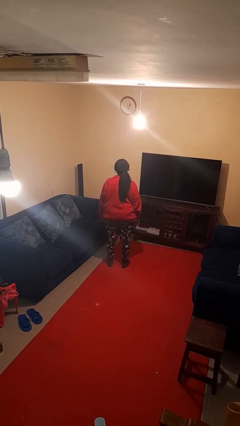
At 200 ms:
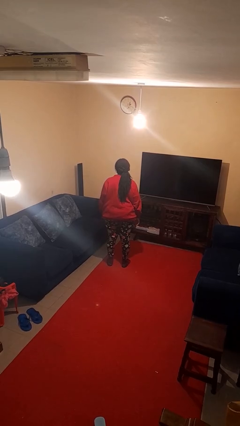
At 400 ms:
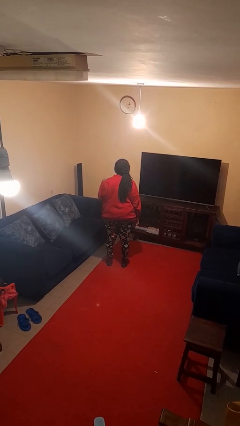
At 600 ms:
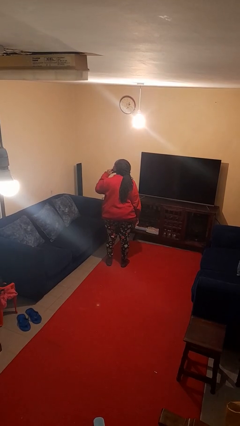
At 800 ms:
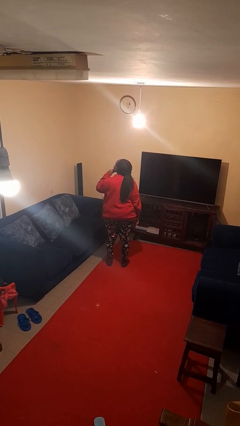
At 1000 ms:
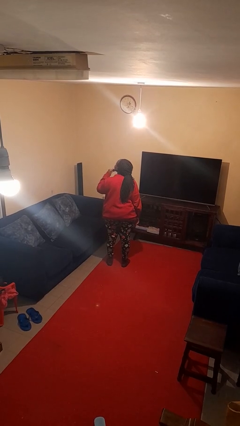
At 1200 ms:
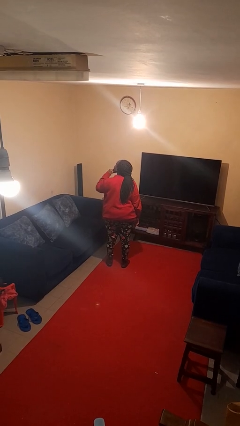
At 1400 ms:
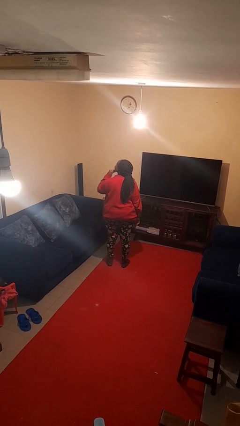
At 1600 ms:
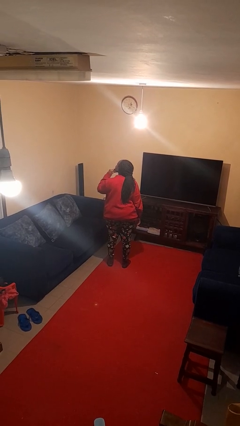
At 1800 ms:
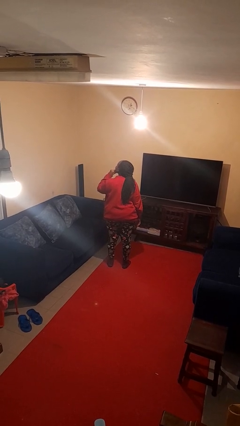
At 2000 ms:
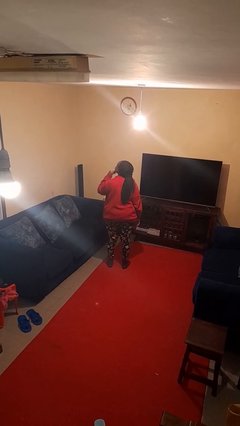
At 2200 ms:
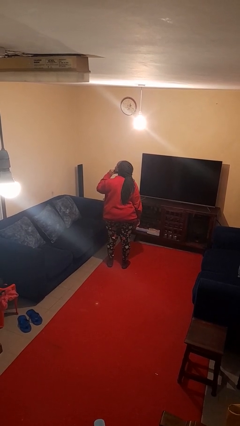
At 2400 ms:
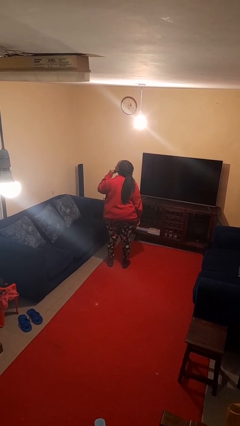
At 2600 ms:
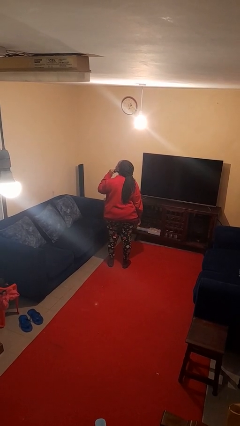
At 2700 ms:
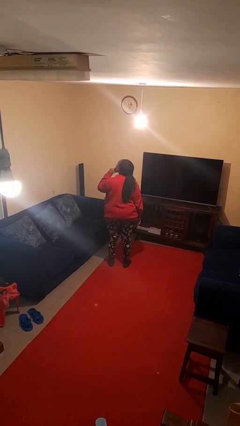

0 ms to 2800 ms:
person strokes chin

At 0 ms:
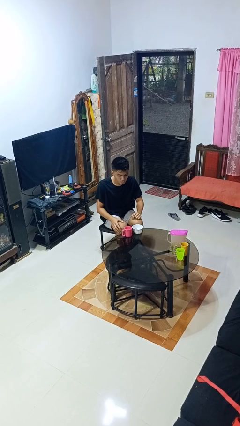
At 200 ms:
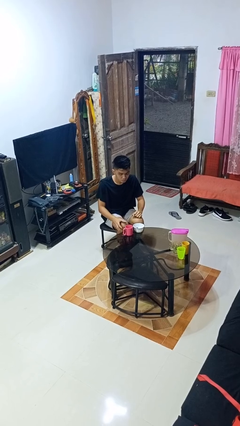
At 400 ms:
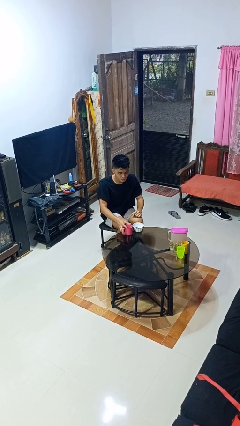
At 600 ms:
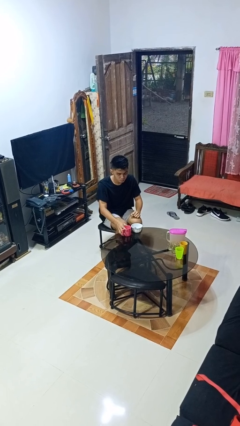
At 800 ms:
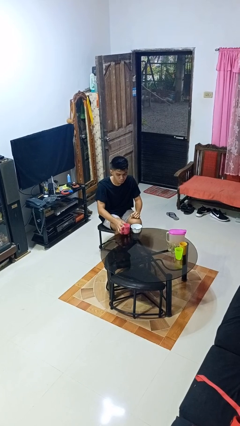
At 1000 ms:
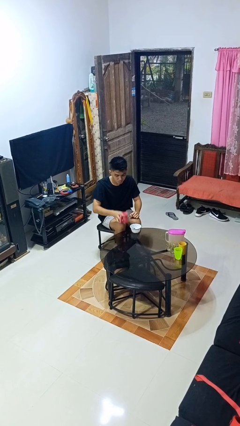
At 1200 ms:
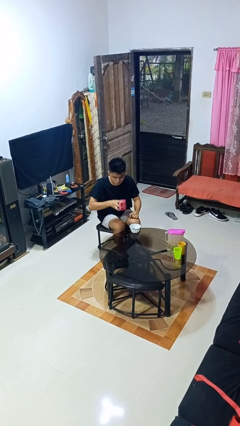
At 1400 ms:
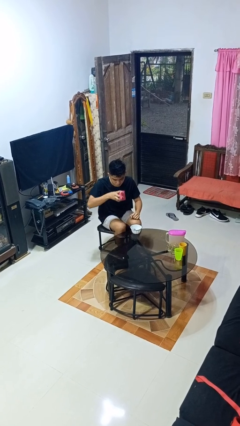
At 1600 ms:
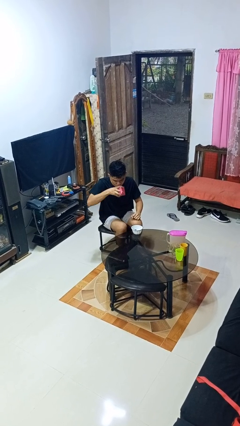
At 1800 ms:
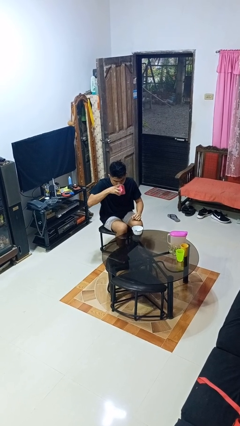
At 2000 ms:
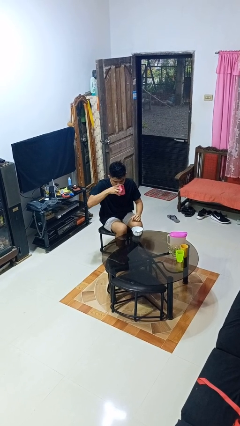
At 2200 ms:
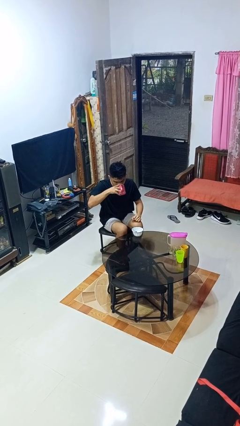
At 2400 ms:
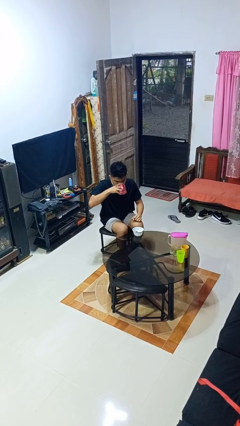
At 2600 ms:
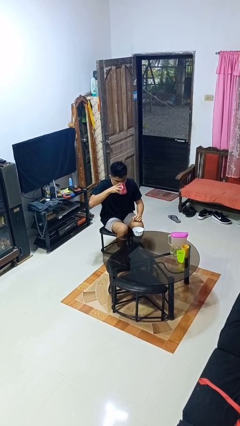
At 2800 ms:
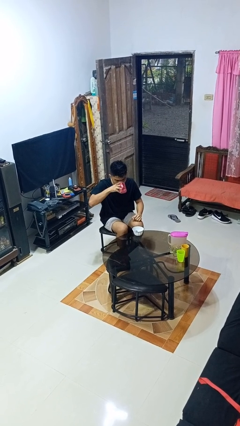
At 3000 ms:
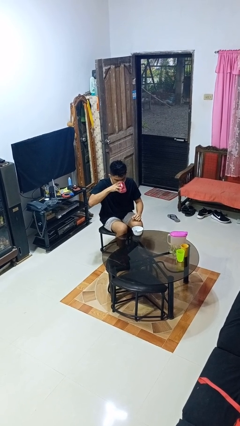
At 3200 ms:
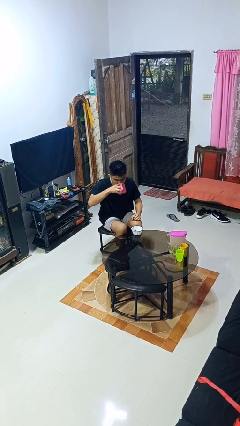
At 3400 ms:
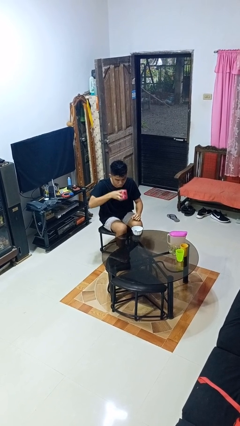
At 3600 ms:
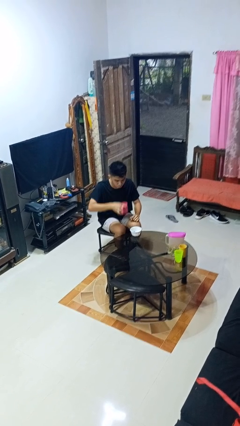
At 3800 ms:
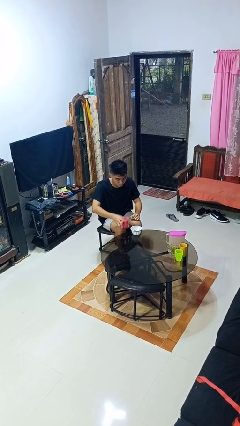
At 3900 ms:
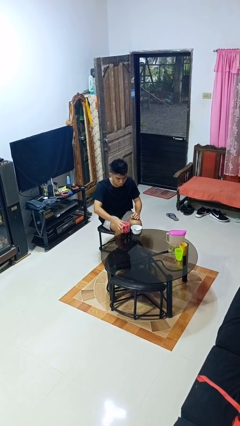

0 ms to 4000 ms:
person drinks from cup

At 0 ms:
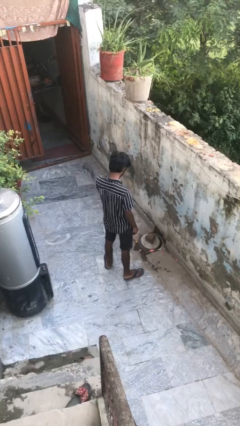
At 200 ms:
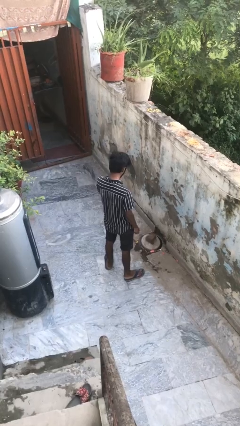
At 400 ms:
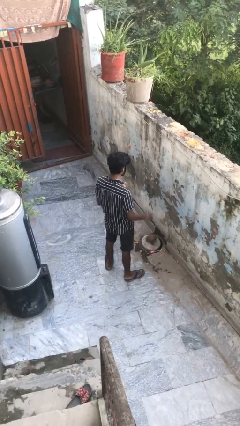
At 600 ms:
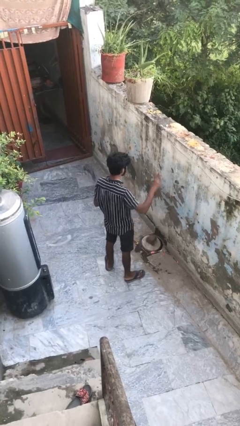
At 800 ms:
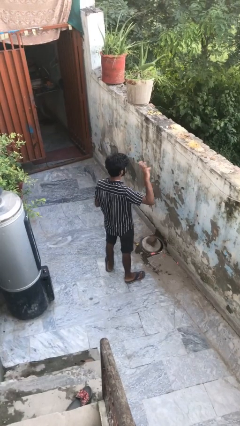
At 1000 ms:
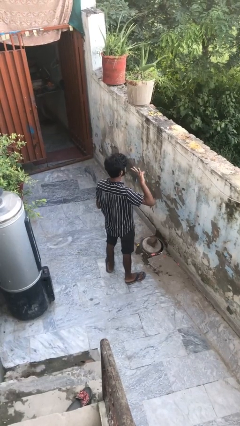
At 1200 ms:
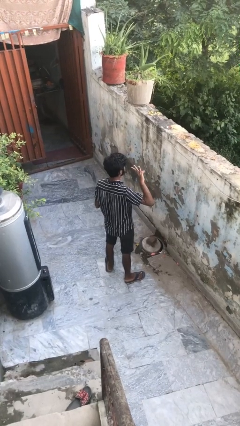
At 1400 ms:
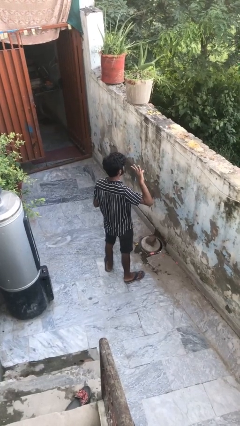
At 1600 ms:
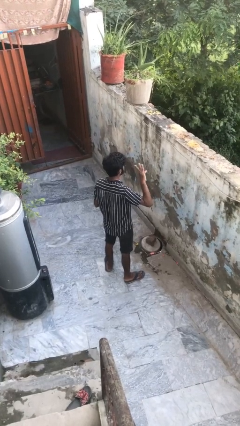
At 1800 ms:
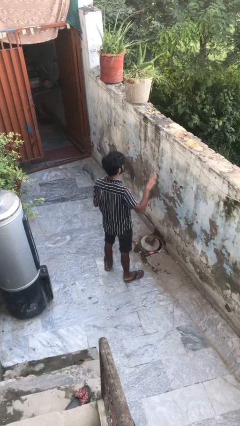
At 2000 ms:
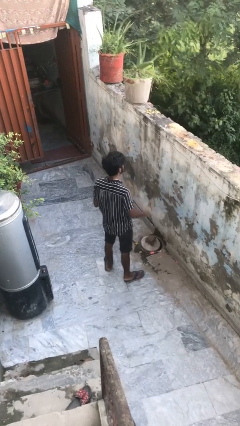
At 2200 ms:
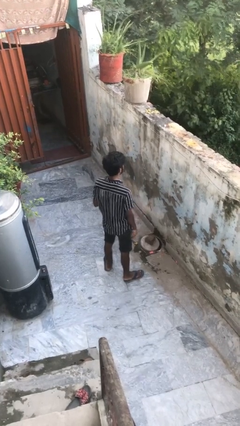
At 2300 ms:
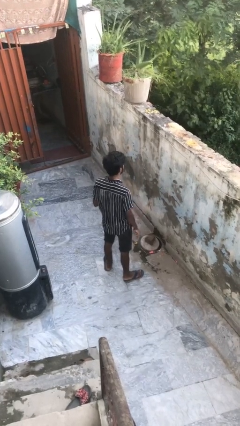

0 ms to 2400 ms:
person gestures number three

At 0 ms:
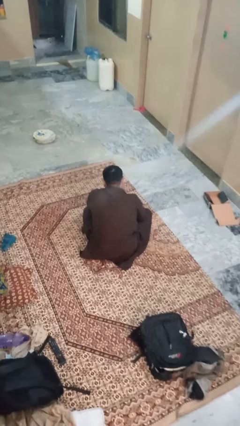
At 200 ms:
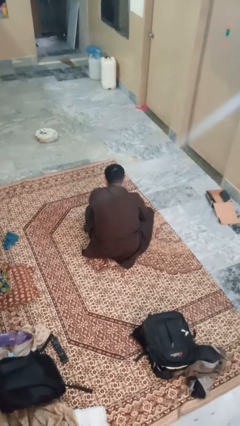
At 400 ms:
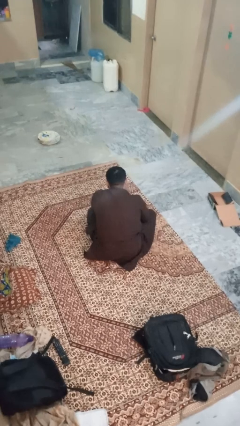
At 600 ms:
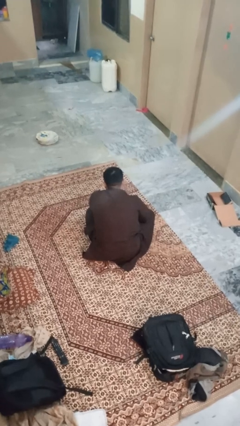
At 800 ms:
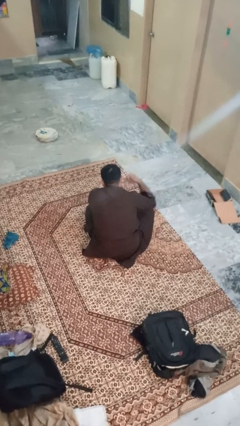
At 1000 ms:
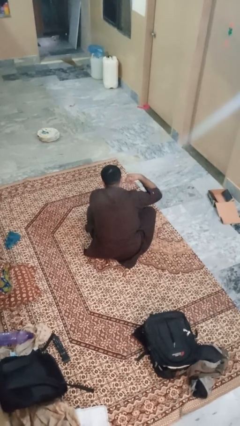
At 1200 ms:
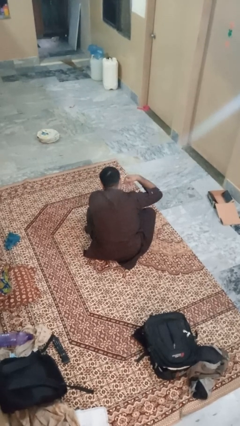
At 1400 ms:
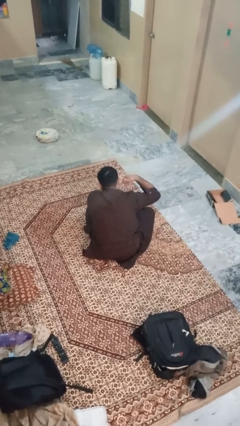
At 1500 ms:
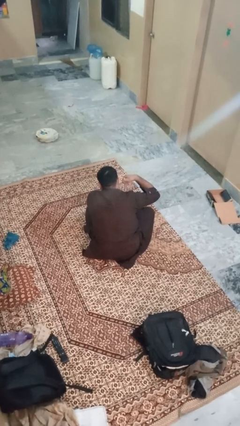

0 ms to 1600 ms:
person gestures call me

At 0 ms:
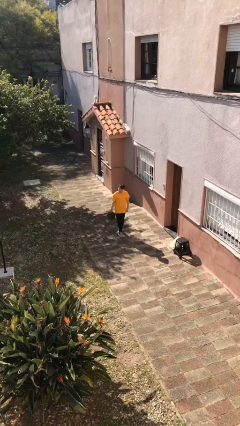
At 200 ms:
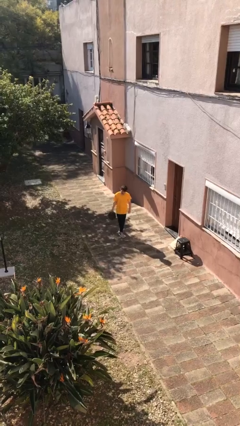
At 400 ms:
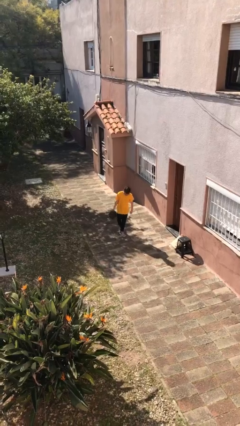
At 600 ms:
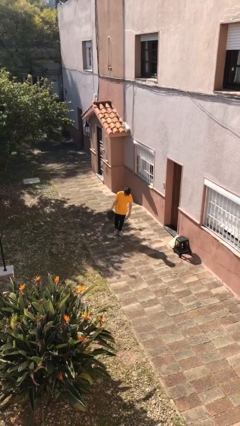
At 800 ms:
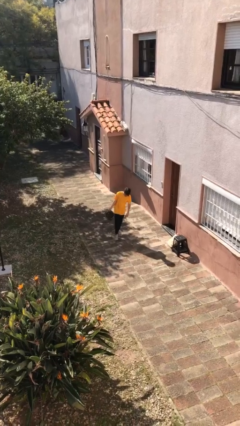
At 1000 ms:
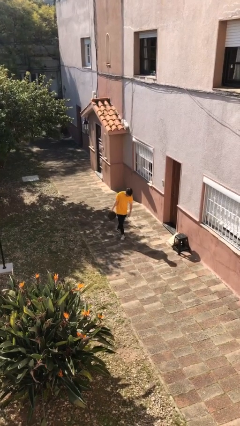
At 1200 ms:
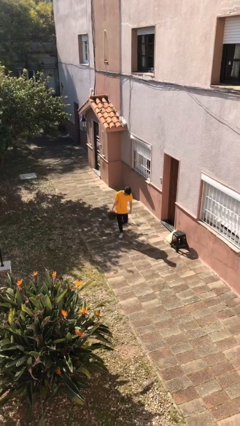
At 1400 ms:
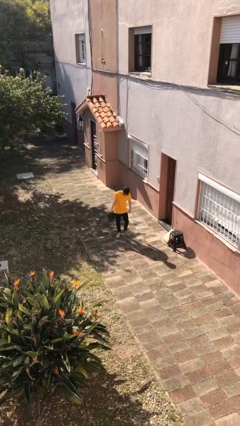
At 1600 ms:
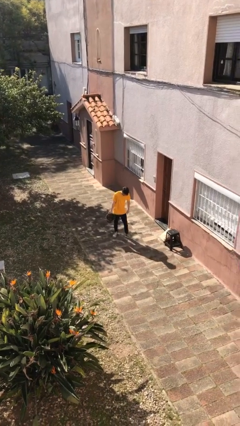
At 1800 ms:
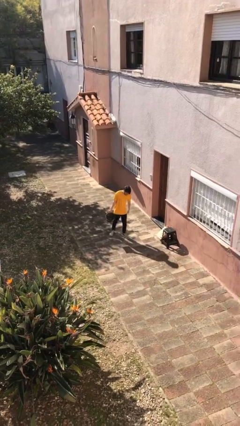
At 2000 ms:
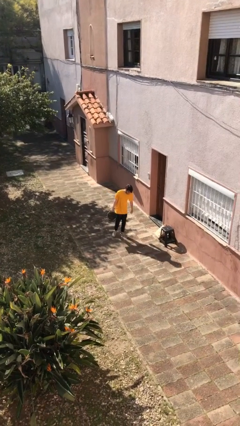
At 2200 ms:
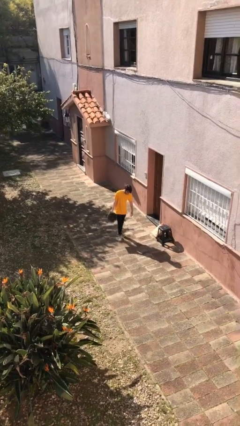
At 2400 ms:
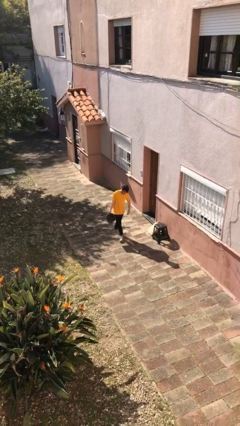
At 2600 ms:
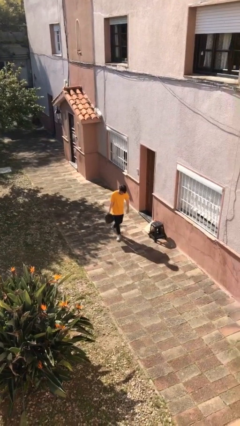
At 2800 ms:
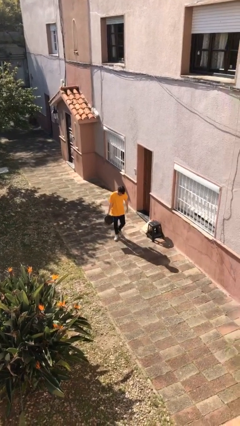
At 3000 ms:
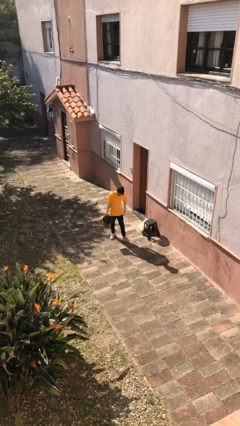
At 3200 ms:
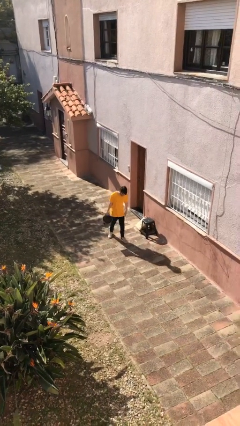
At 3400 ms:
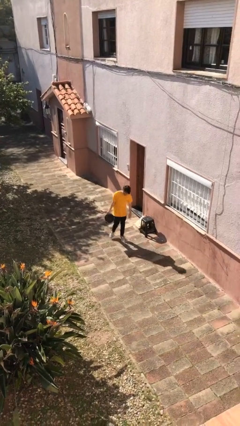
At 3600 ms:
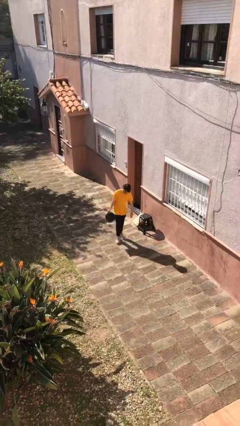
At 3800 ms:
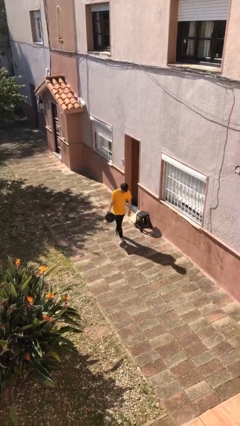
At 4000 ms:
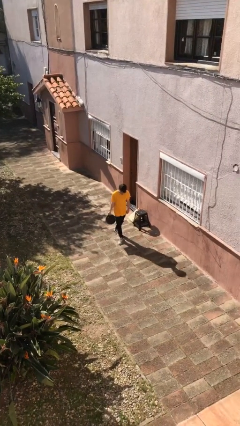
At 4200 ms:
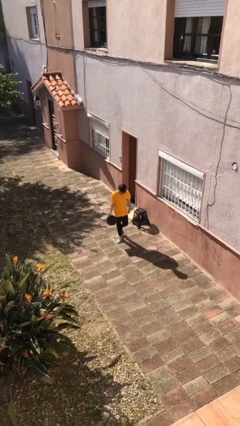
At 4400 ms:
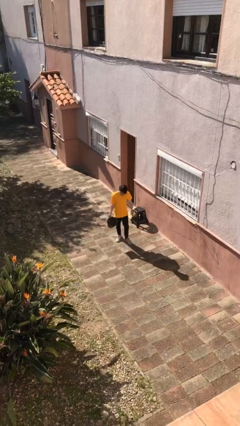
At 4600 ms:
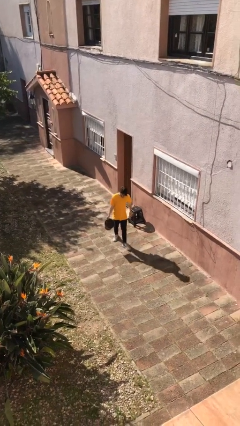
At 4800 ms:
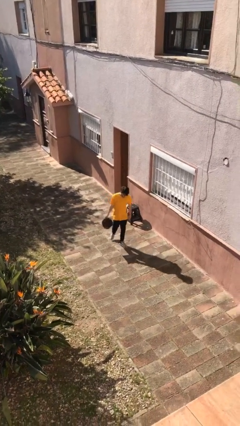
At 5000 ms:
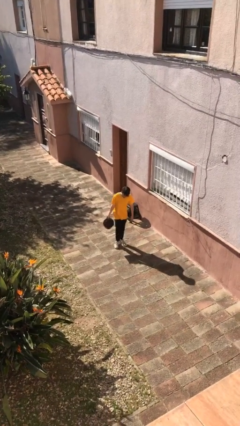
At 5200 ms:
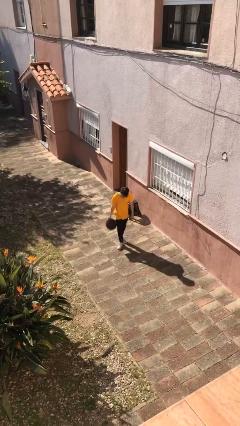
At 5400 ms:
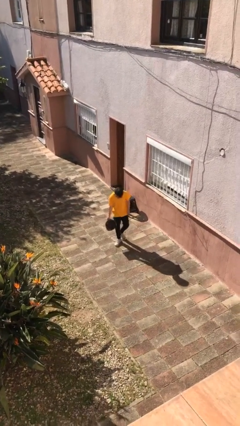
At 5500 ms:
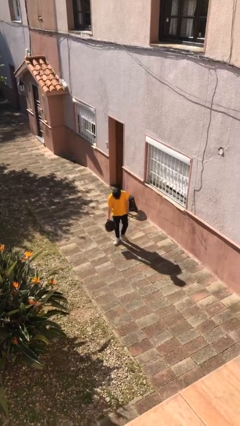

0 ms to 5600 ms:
person carries heavy object

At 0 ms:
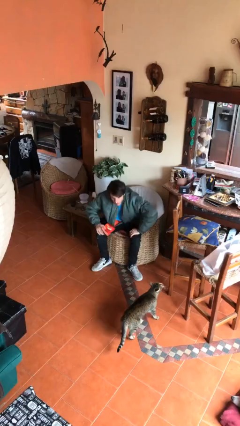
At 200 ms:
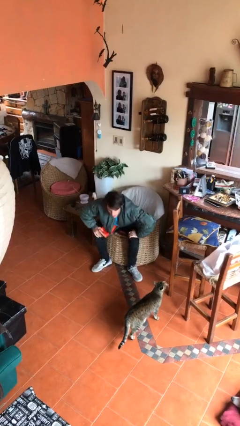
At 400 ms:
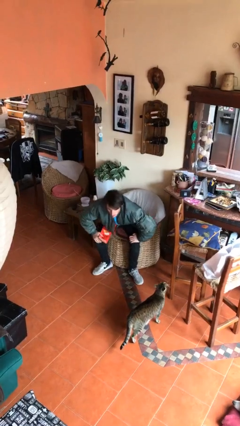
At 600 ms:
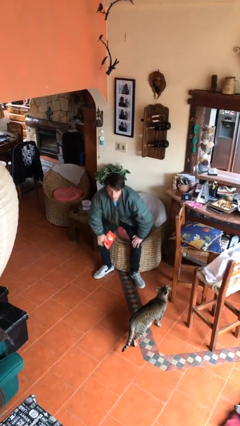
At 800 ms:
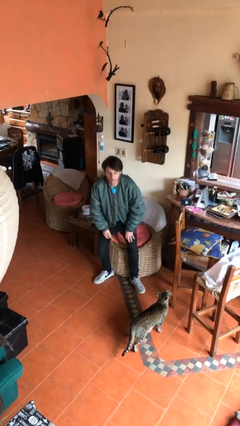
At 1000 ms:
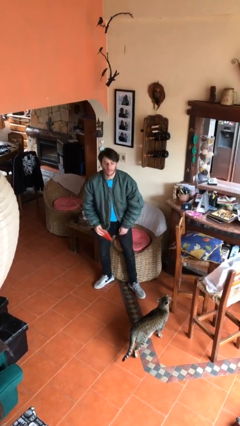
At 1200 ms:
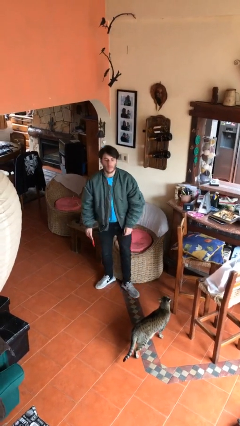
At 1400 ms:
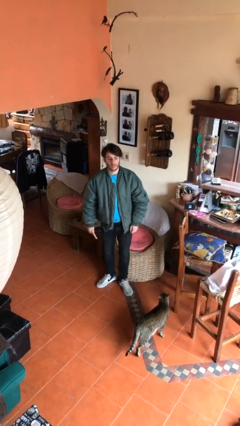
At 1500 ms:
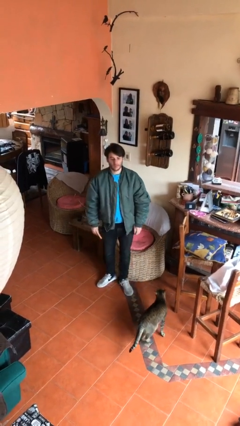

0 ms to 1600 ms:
person stands up
